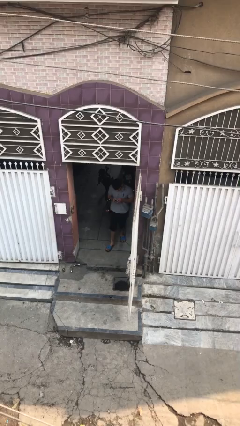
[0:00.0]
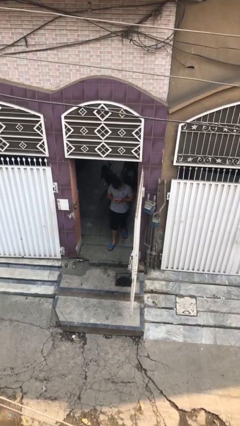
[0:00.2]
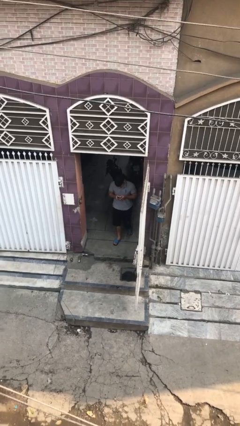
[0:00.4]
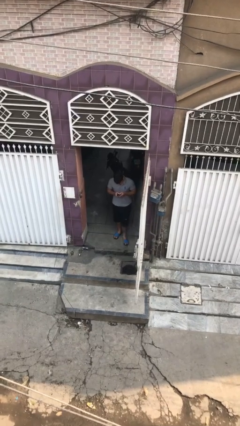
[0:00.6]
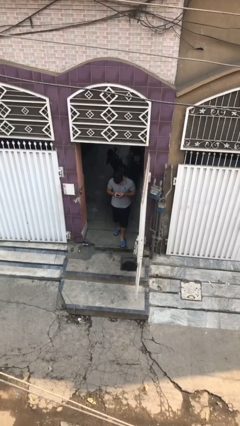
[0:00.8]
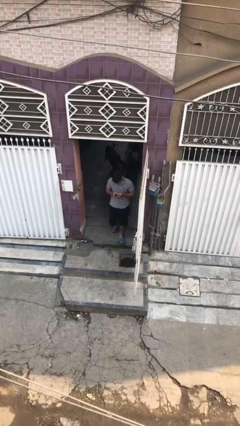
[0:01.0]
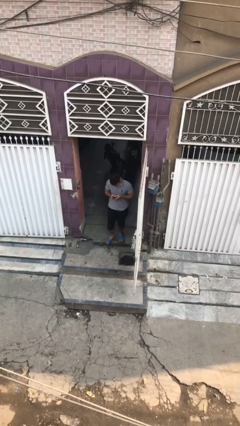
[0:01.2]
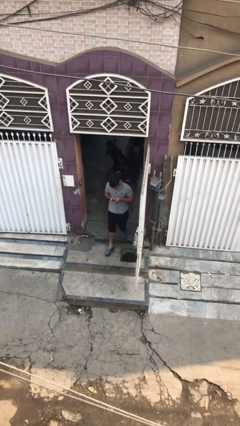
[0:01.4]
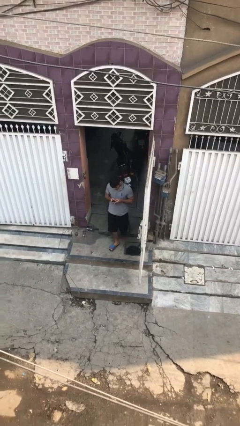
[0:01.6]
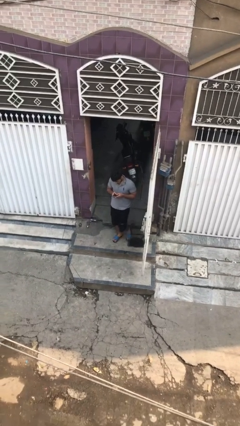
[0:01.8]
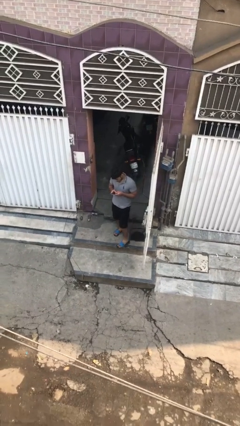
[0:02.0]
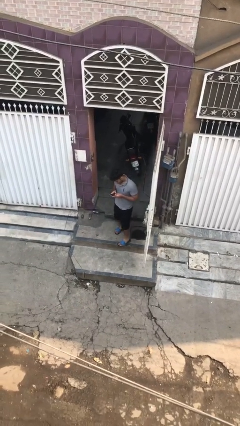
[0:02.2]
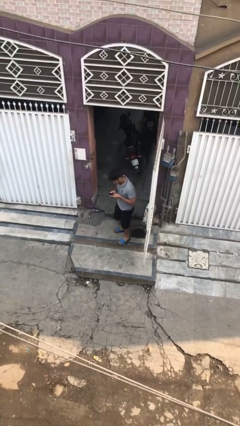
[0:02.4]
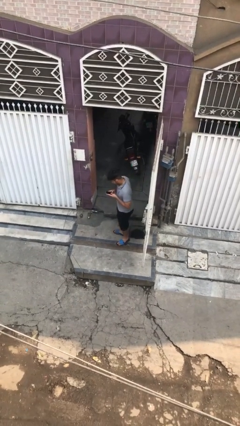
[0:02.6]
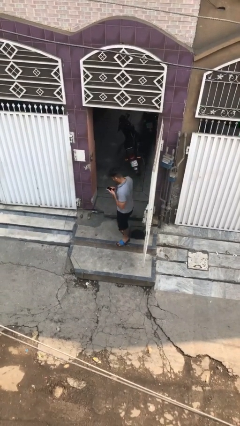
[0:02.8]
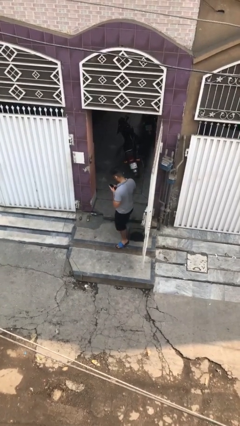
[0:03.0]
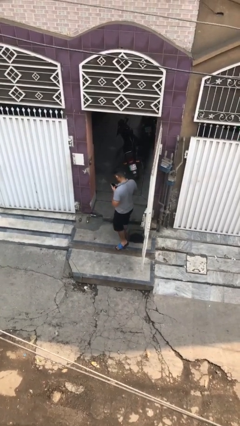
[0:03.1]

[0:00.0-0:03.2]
person enters scene through structure

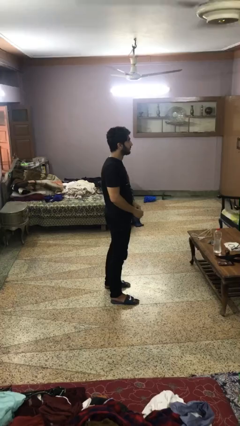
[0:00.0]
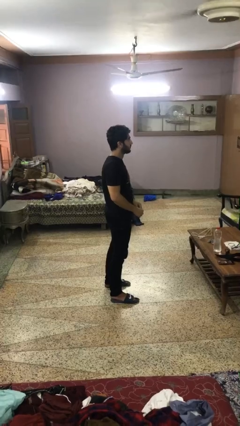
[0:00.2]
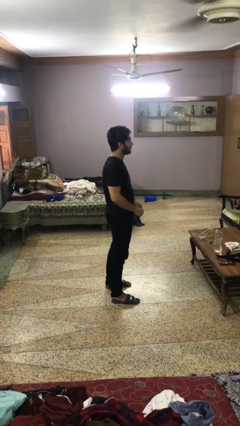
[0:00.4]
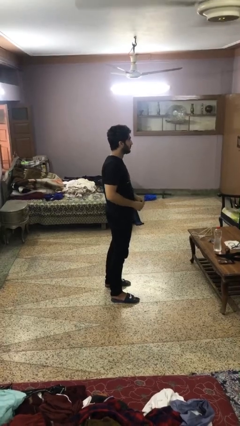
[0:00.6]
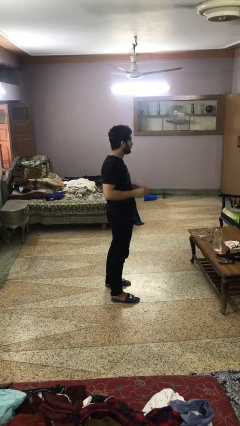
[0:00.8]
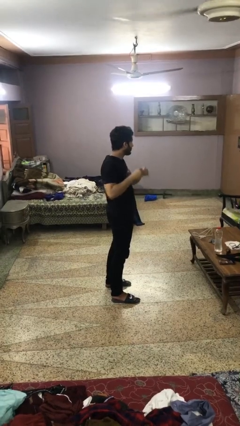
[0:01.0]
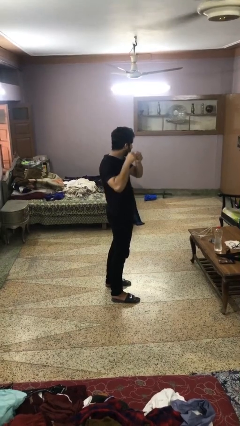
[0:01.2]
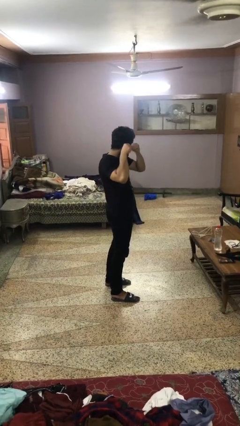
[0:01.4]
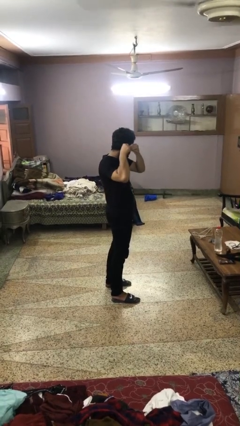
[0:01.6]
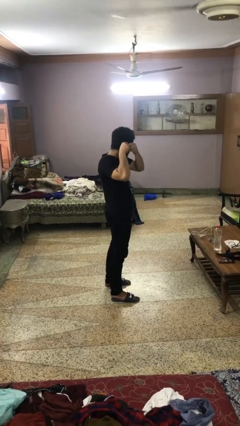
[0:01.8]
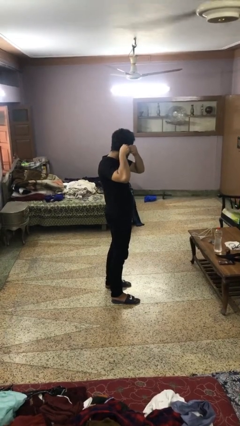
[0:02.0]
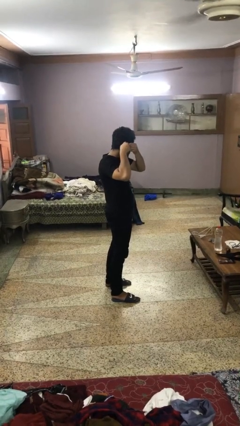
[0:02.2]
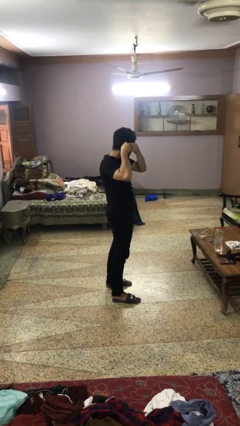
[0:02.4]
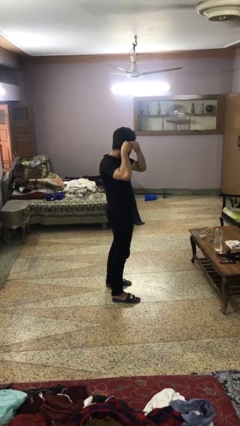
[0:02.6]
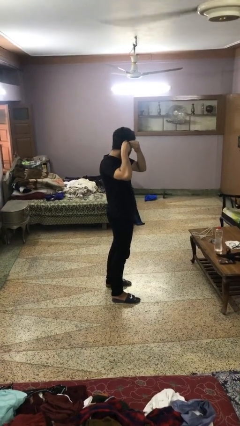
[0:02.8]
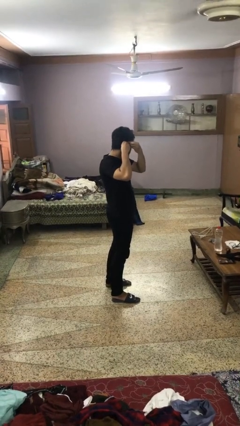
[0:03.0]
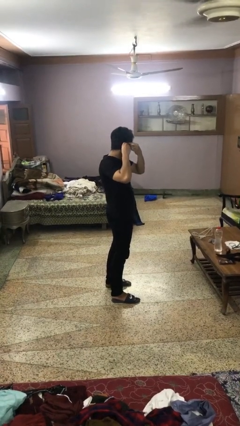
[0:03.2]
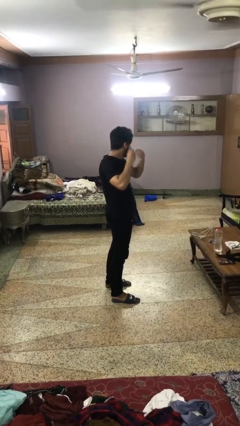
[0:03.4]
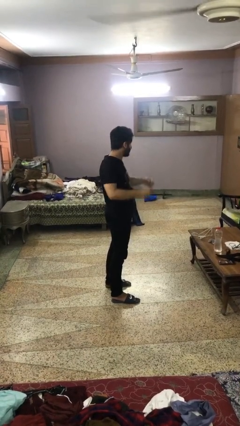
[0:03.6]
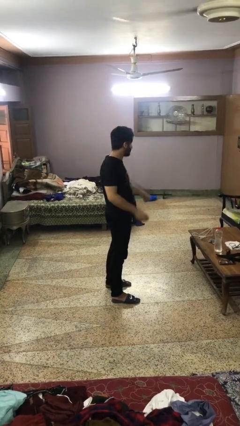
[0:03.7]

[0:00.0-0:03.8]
person puts on earrings

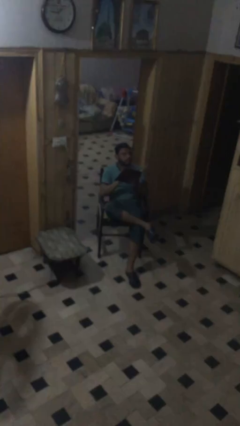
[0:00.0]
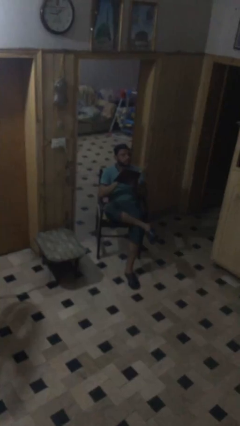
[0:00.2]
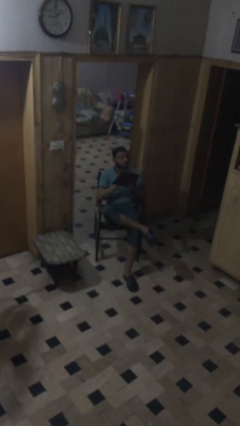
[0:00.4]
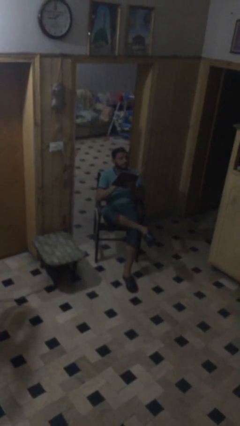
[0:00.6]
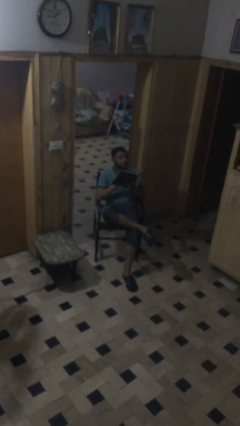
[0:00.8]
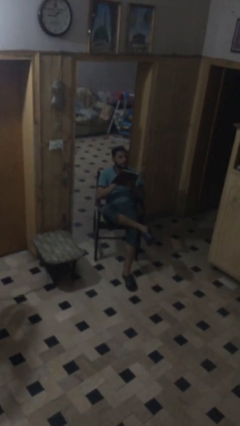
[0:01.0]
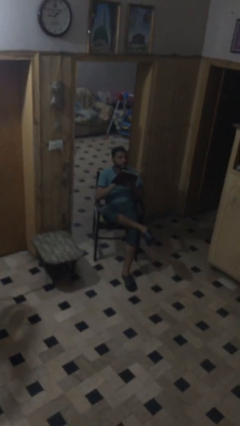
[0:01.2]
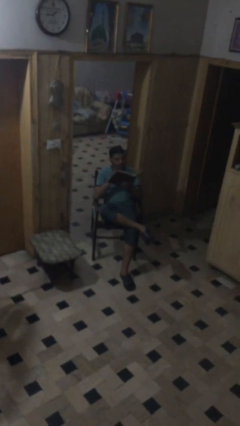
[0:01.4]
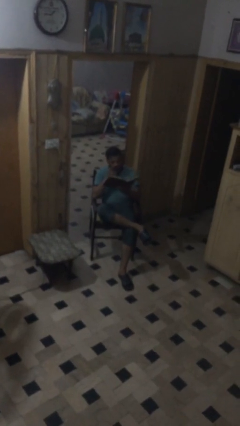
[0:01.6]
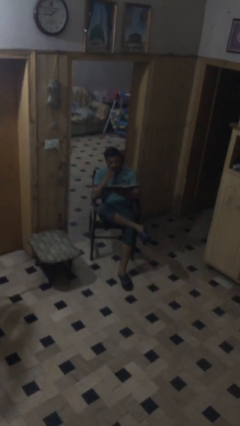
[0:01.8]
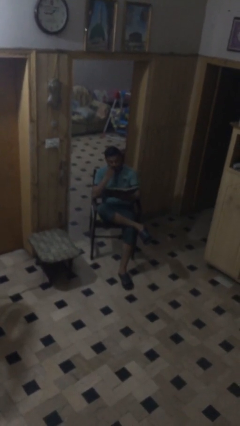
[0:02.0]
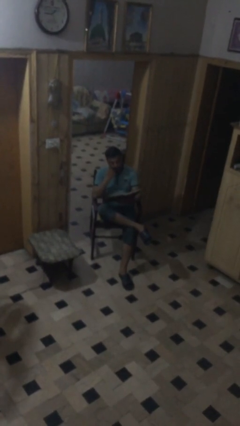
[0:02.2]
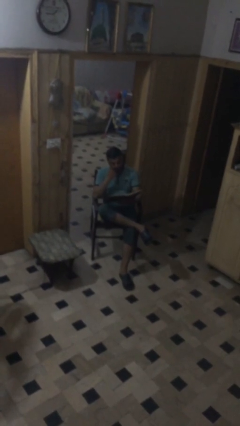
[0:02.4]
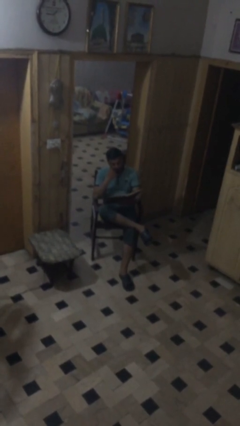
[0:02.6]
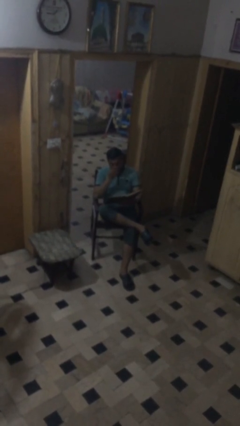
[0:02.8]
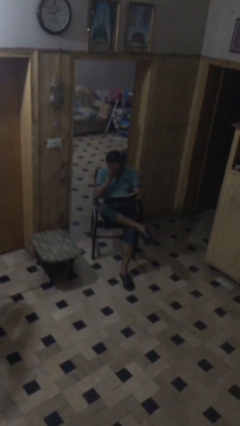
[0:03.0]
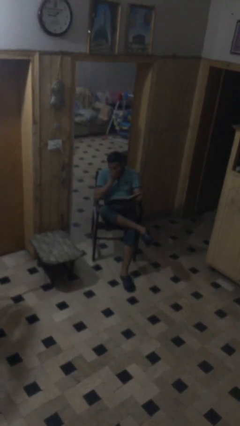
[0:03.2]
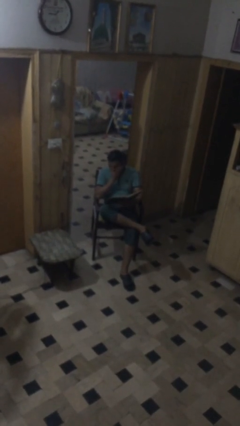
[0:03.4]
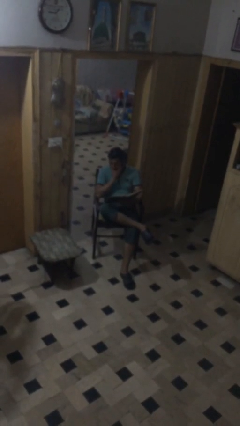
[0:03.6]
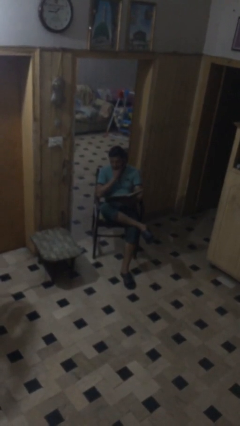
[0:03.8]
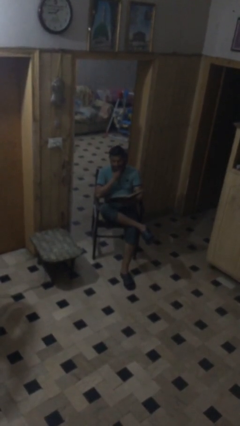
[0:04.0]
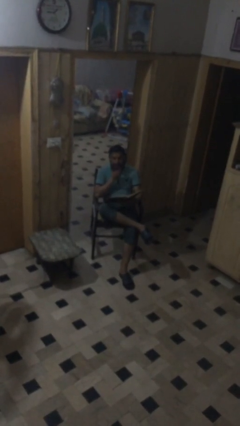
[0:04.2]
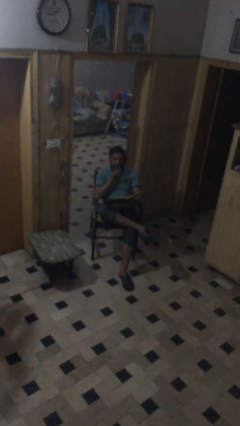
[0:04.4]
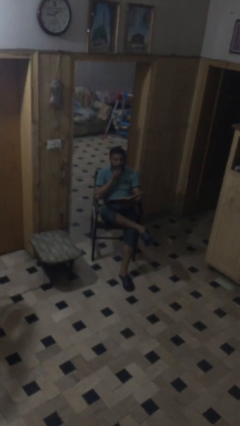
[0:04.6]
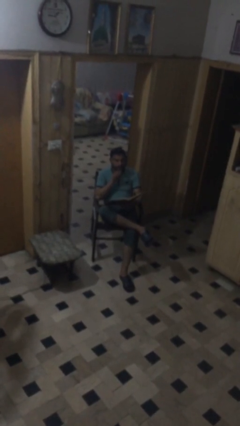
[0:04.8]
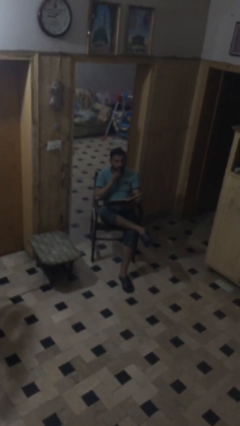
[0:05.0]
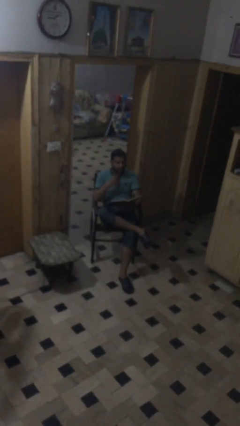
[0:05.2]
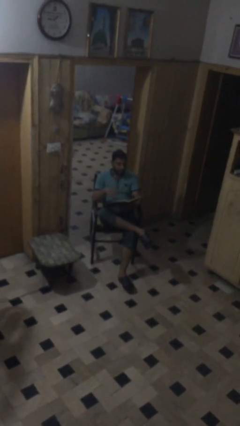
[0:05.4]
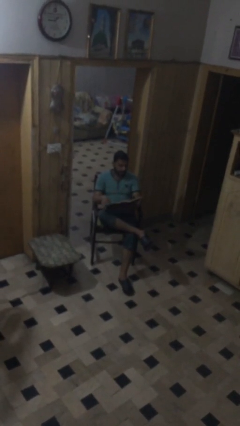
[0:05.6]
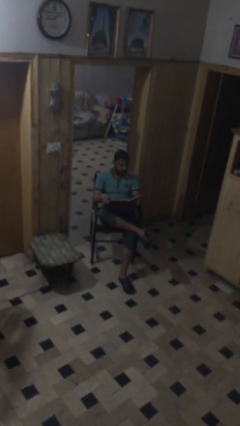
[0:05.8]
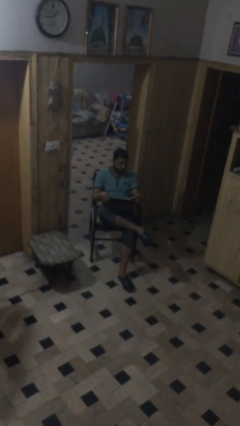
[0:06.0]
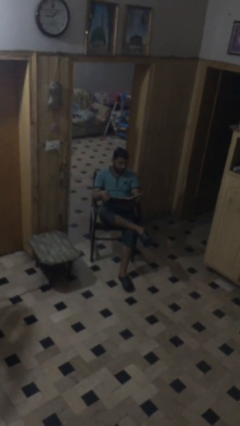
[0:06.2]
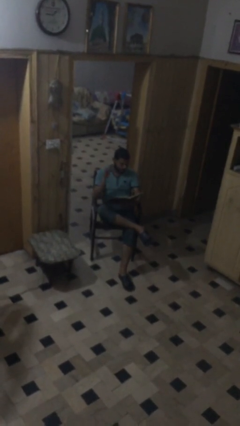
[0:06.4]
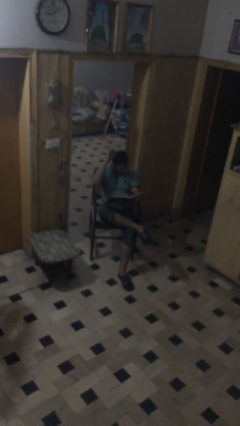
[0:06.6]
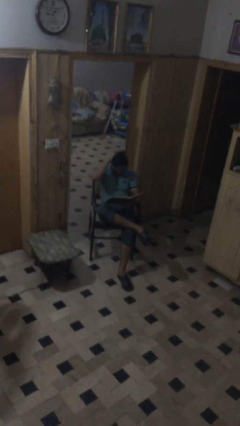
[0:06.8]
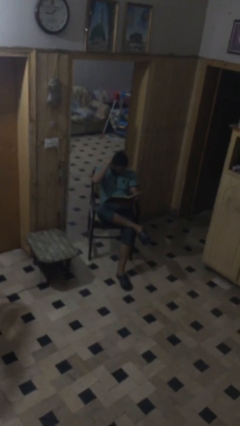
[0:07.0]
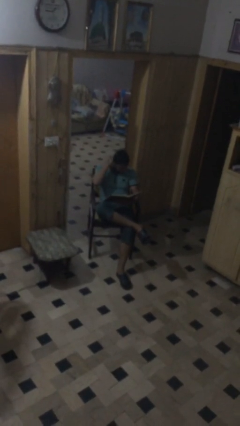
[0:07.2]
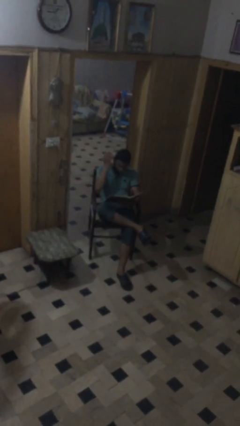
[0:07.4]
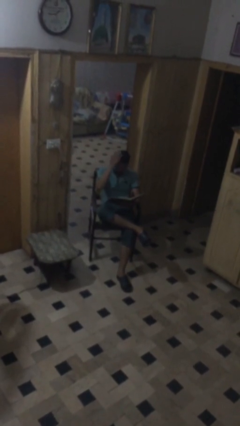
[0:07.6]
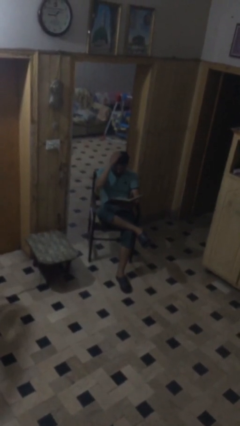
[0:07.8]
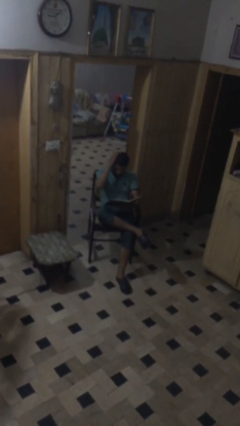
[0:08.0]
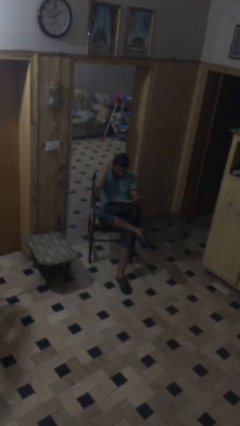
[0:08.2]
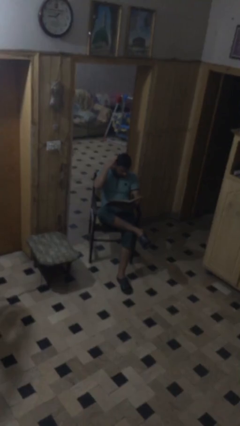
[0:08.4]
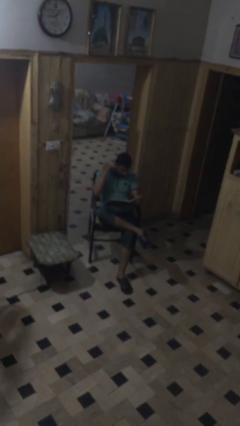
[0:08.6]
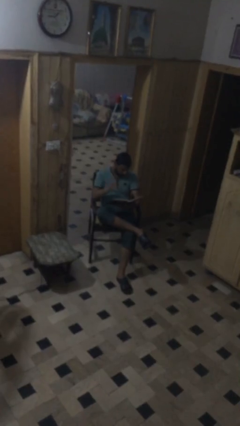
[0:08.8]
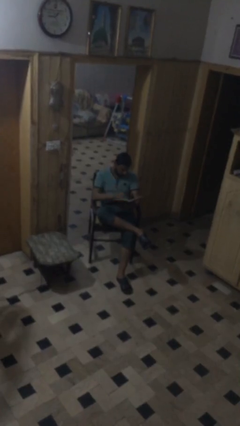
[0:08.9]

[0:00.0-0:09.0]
person reads document

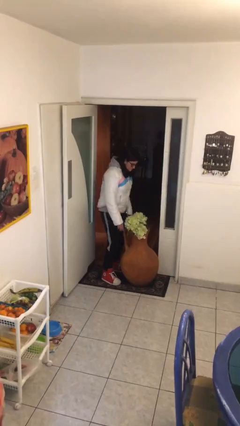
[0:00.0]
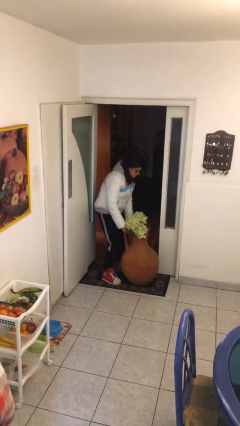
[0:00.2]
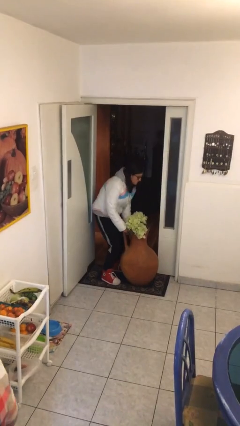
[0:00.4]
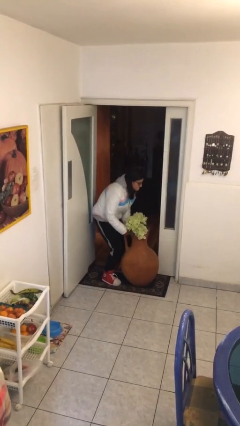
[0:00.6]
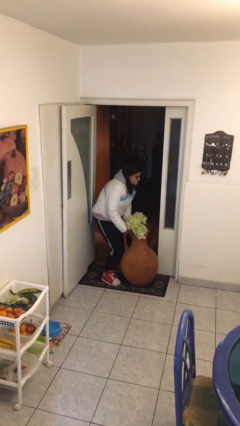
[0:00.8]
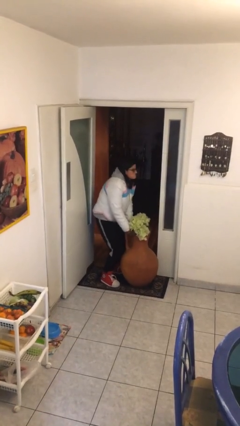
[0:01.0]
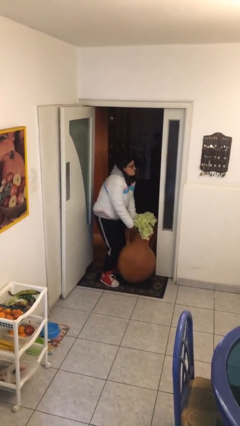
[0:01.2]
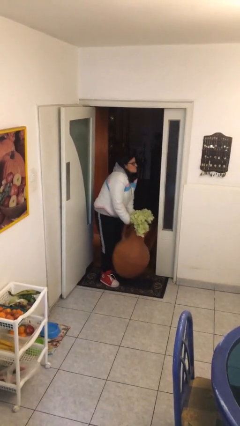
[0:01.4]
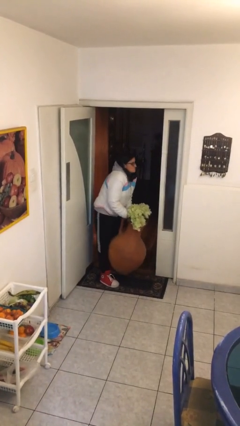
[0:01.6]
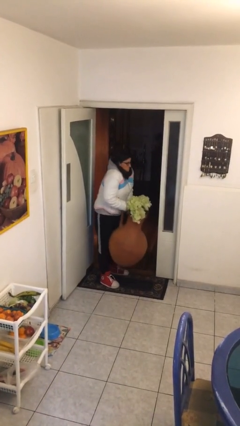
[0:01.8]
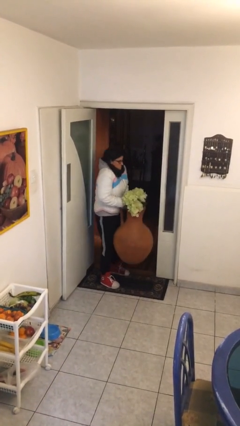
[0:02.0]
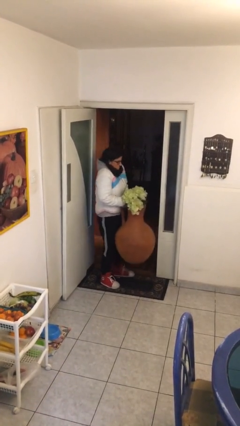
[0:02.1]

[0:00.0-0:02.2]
person picks up object from floor
